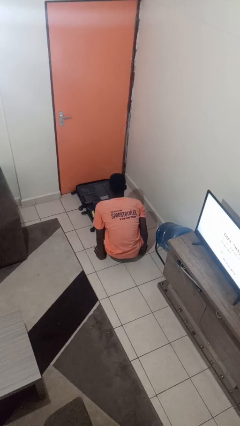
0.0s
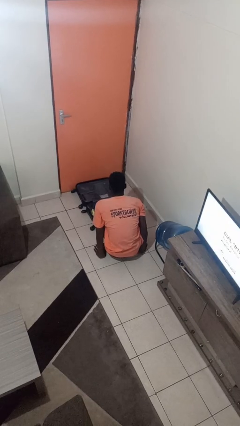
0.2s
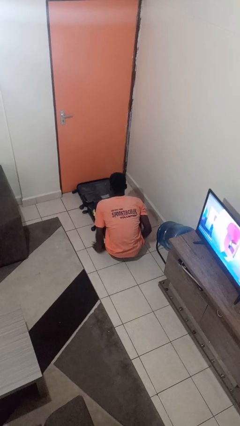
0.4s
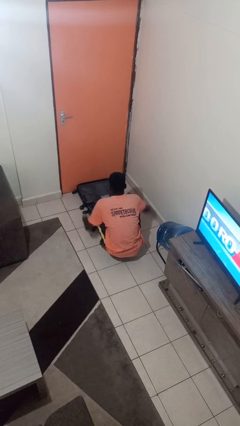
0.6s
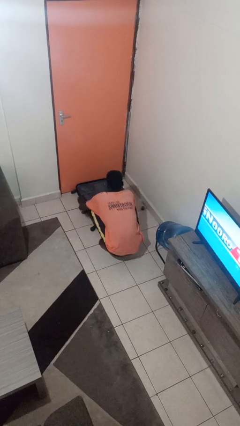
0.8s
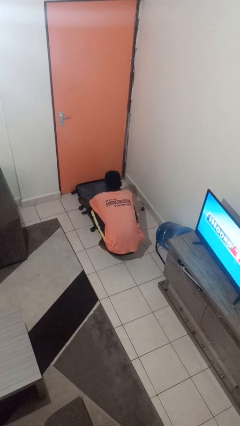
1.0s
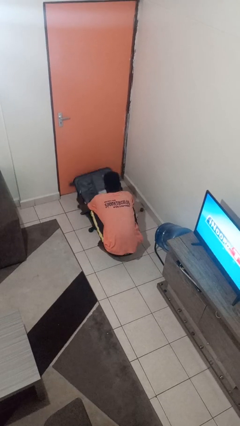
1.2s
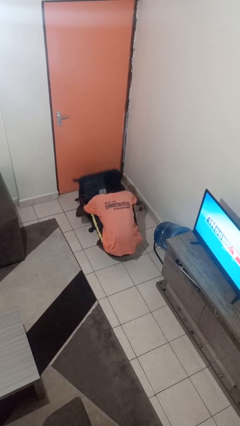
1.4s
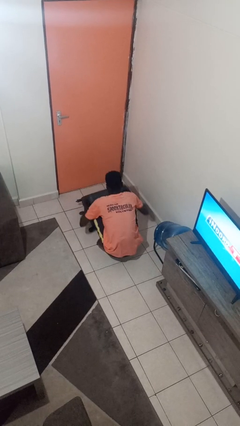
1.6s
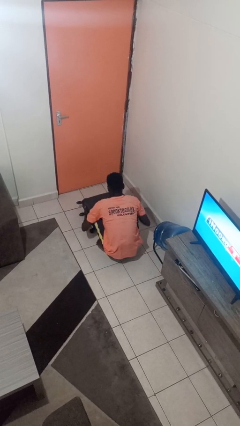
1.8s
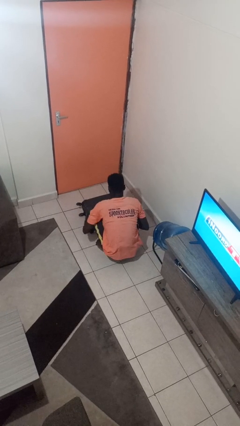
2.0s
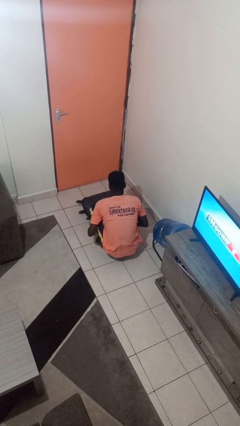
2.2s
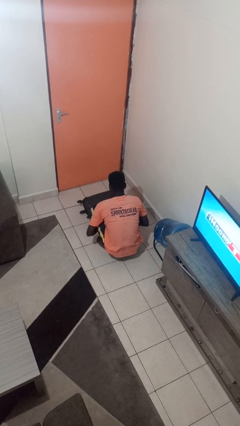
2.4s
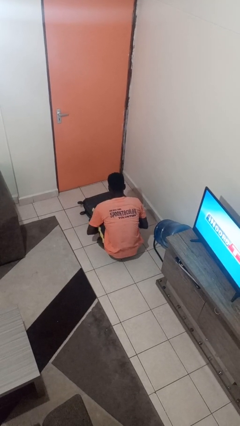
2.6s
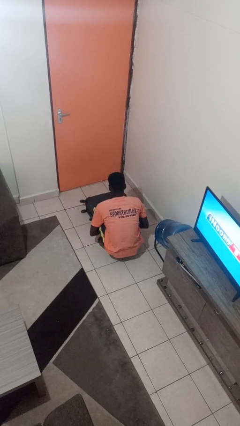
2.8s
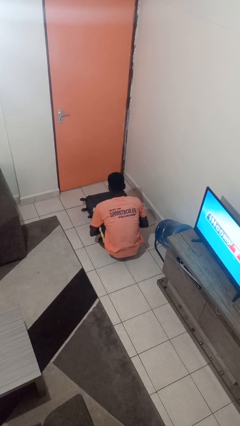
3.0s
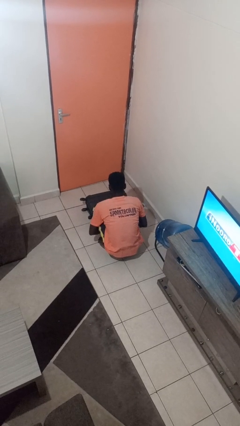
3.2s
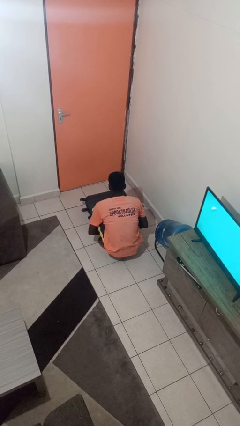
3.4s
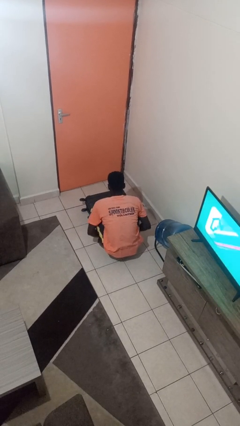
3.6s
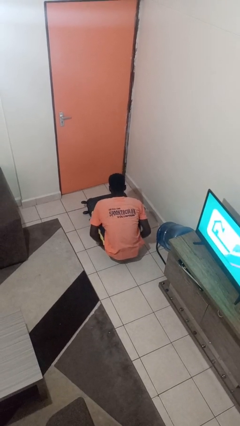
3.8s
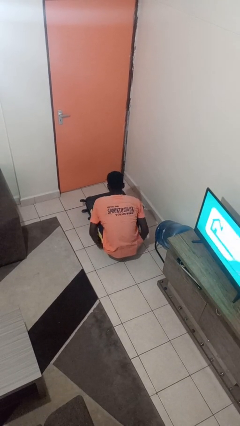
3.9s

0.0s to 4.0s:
person closes suitcase

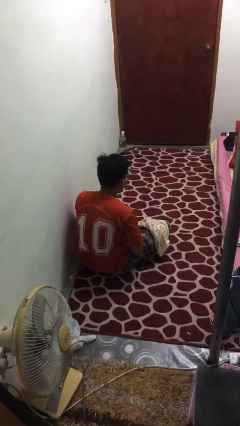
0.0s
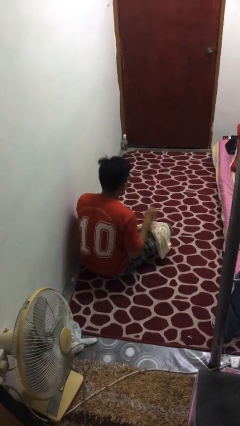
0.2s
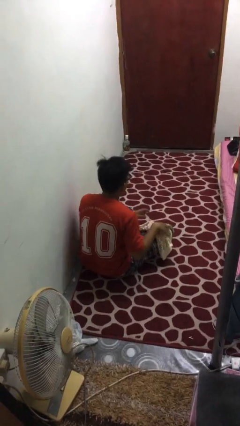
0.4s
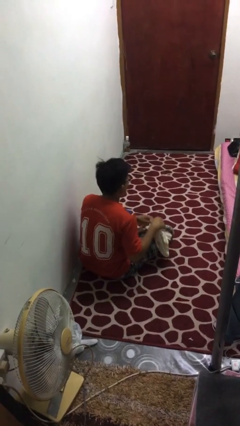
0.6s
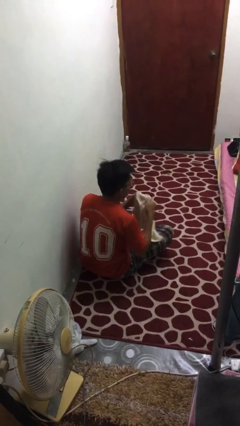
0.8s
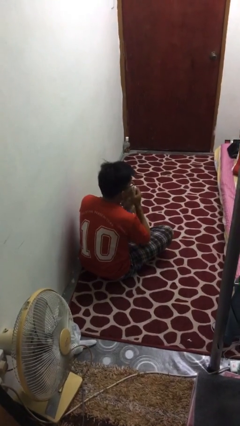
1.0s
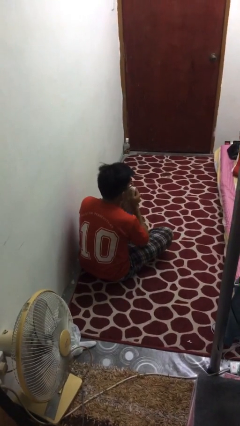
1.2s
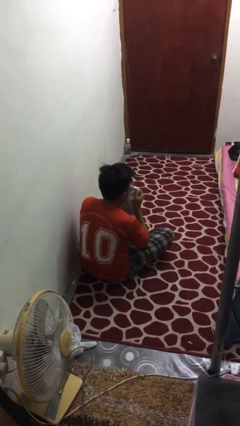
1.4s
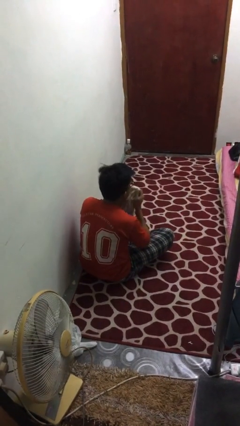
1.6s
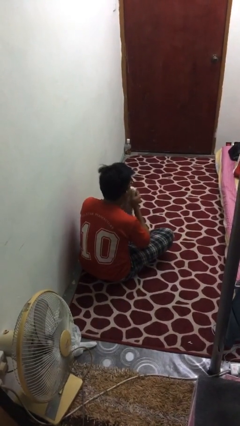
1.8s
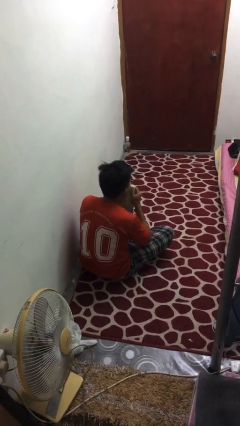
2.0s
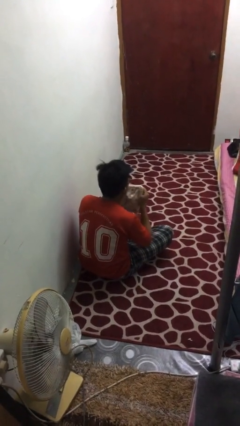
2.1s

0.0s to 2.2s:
person wipes mouth with napkin

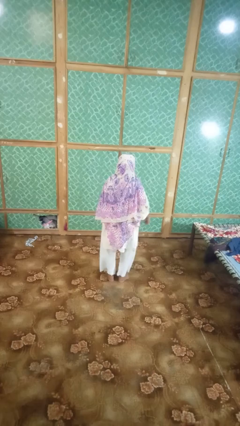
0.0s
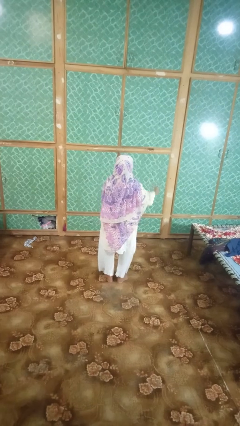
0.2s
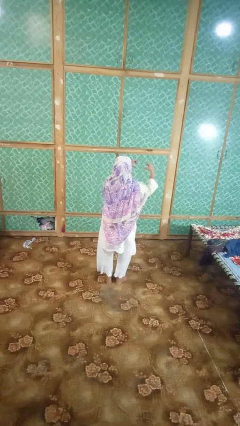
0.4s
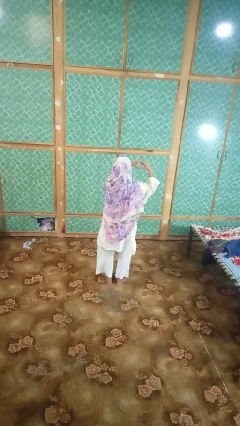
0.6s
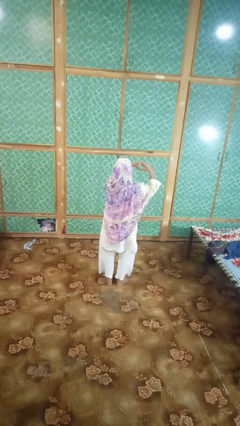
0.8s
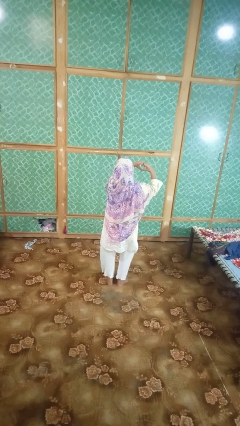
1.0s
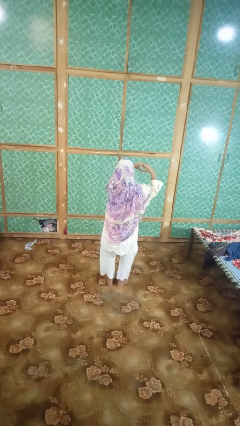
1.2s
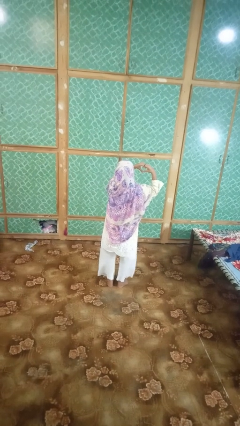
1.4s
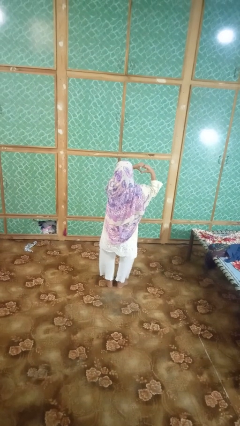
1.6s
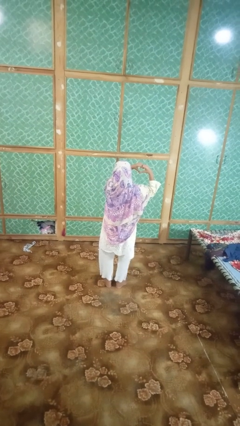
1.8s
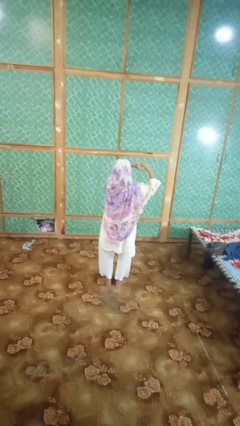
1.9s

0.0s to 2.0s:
person gestures heart

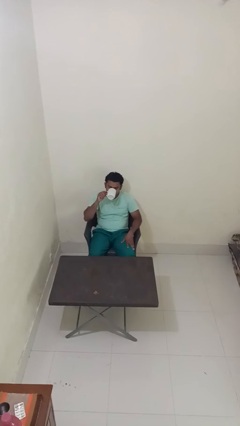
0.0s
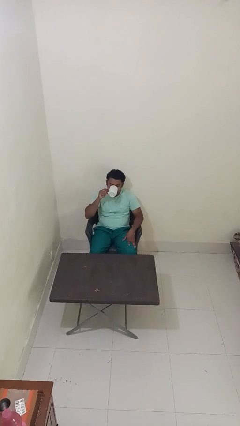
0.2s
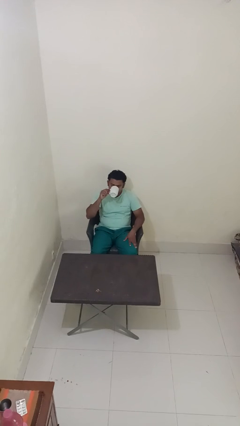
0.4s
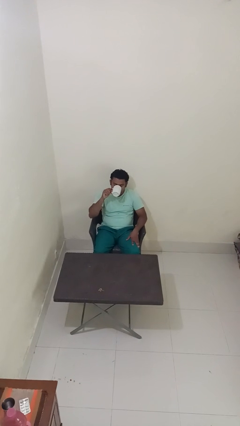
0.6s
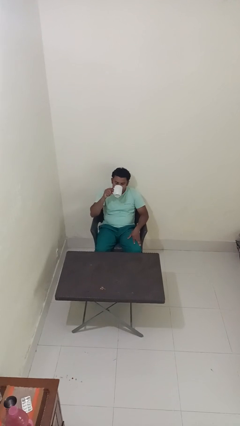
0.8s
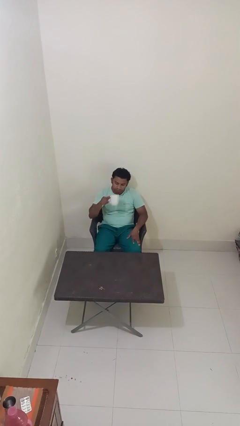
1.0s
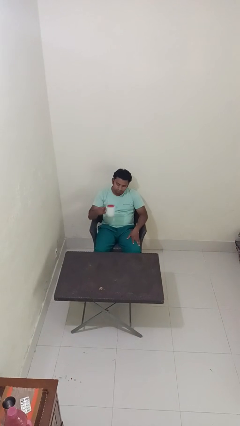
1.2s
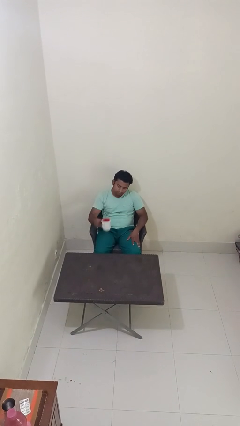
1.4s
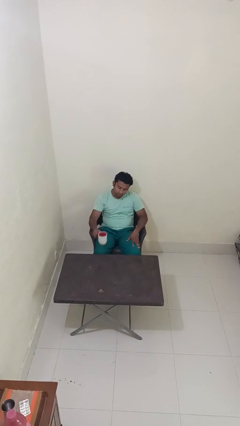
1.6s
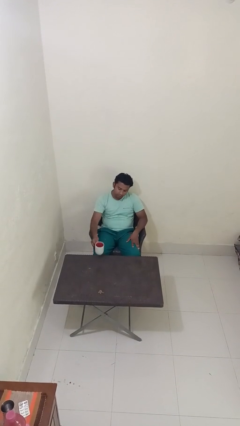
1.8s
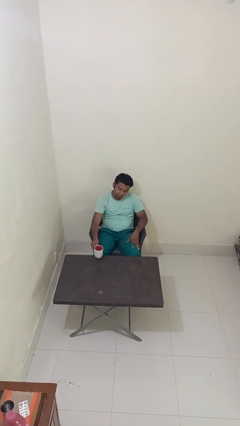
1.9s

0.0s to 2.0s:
person puts down object on table

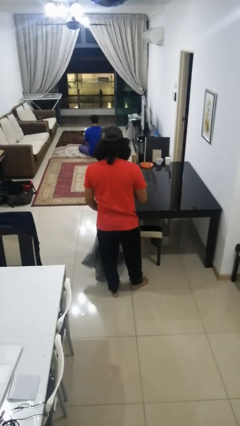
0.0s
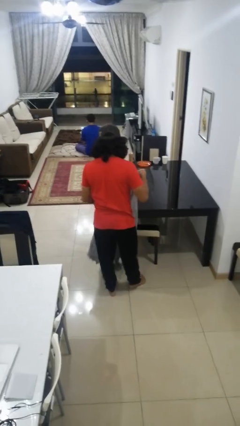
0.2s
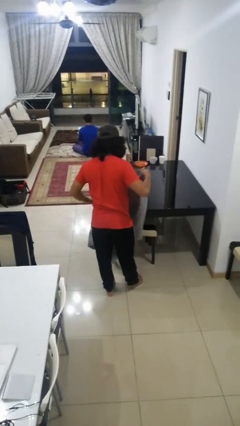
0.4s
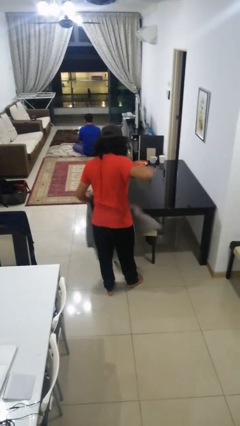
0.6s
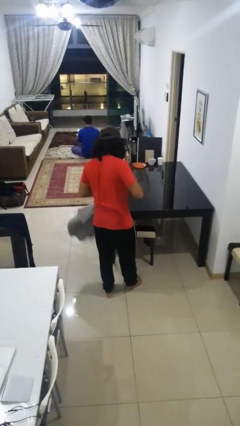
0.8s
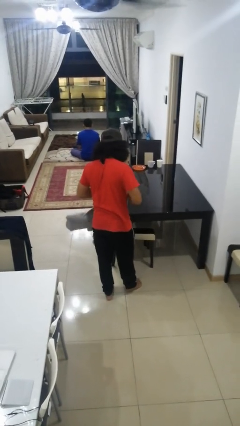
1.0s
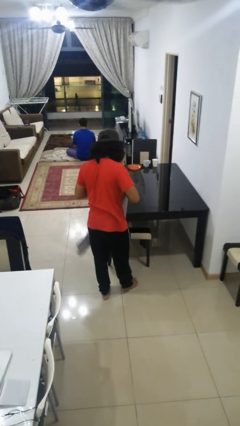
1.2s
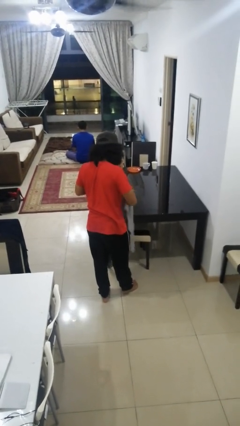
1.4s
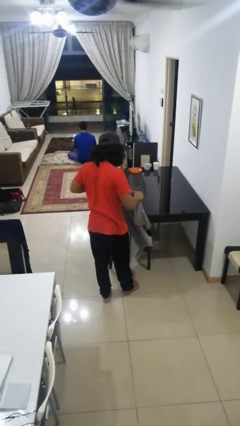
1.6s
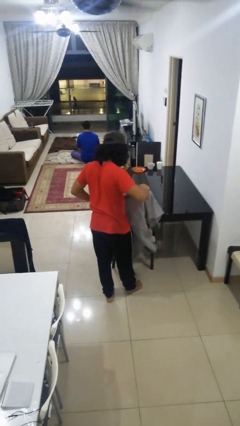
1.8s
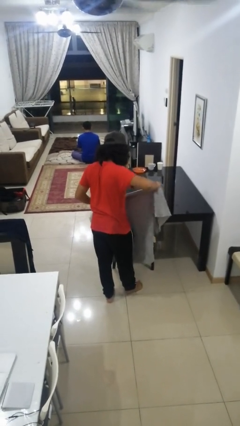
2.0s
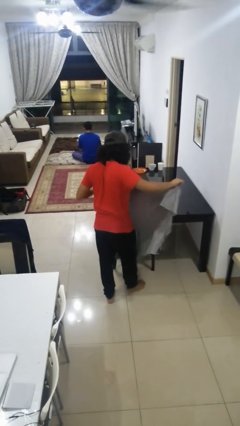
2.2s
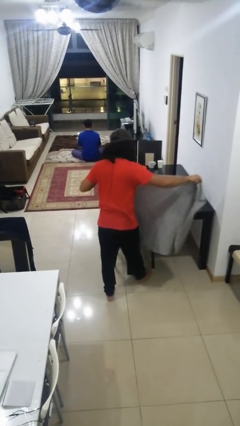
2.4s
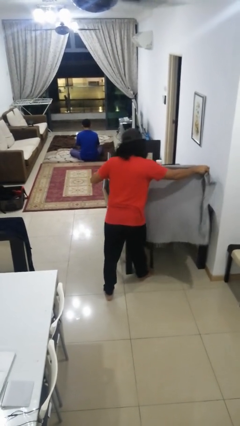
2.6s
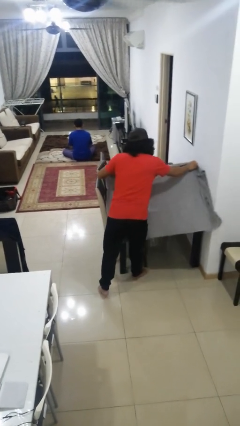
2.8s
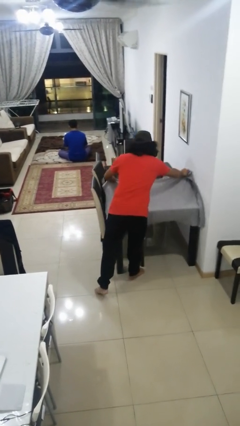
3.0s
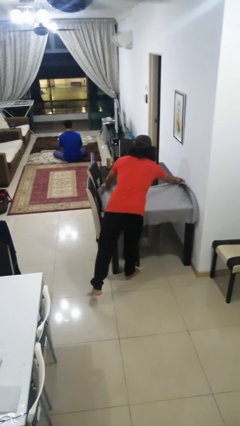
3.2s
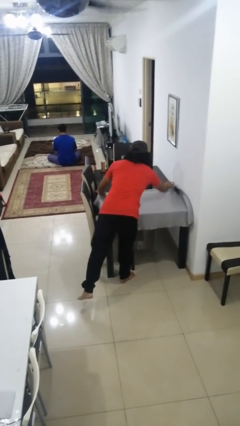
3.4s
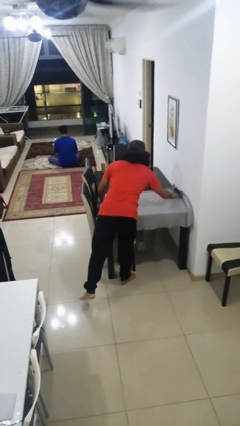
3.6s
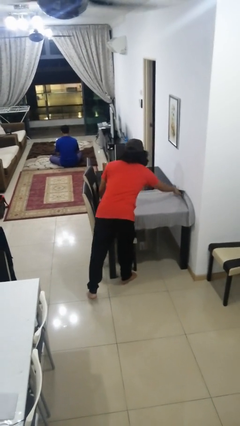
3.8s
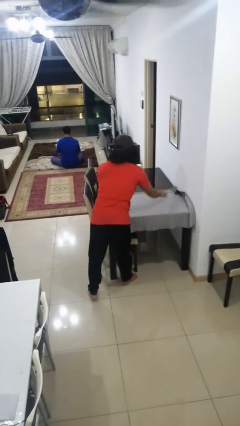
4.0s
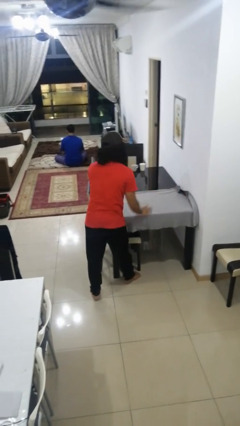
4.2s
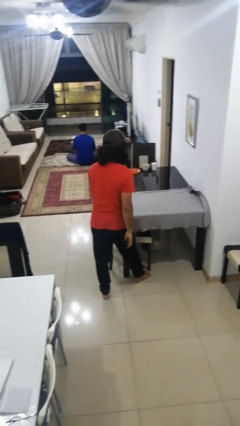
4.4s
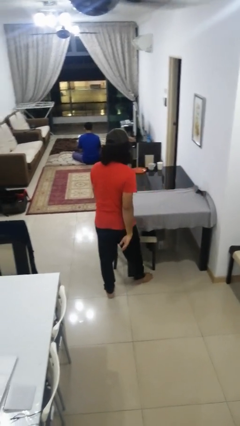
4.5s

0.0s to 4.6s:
person spreads tablecloth

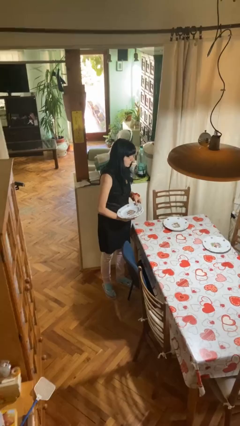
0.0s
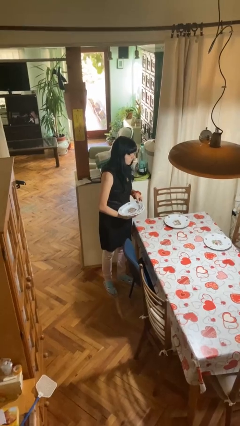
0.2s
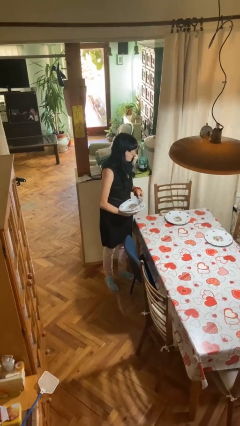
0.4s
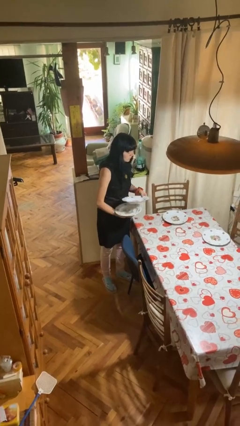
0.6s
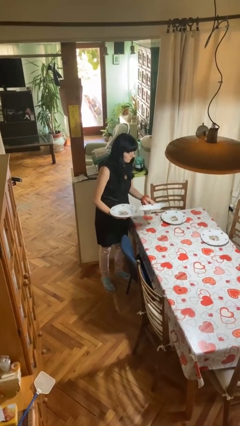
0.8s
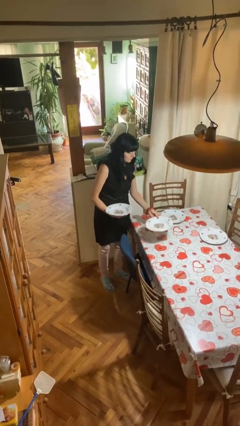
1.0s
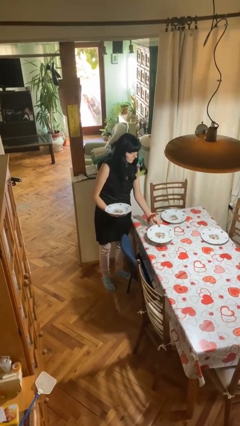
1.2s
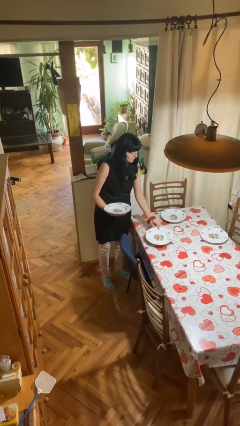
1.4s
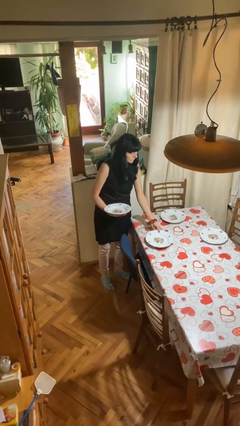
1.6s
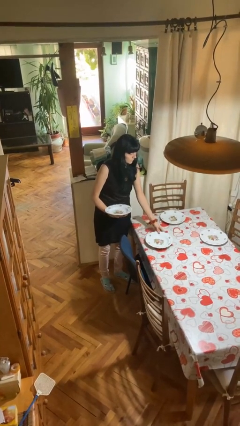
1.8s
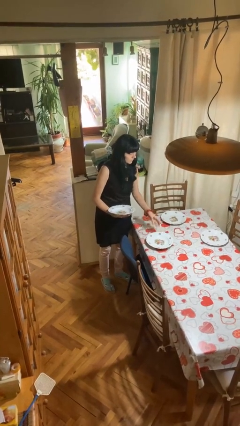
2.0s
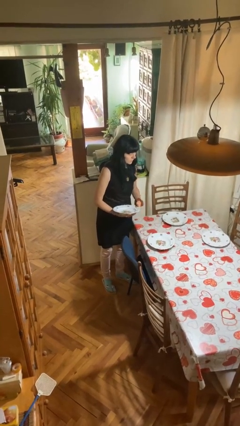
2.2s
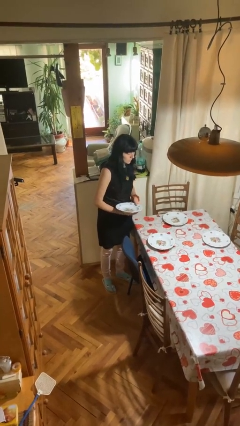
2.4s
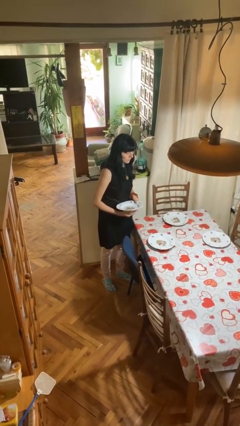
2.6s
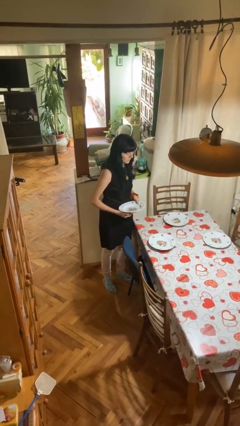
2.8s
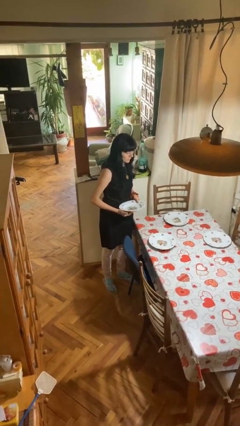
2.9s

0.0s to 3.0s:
person sets table
